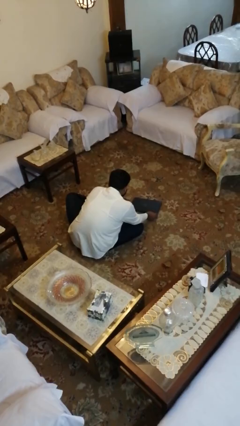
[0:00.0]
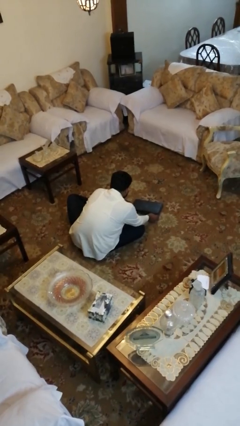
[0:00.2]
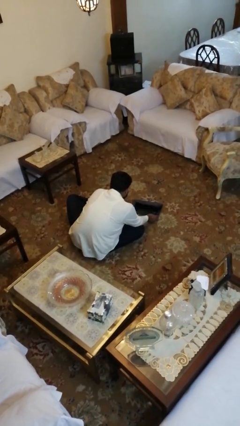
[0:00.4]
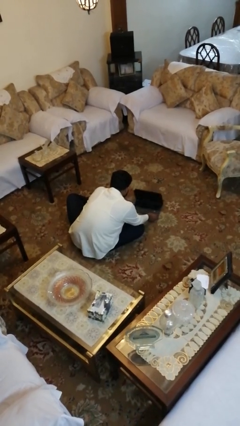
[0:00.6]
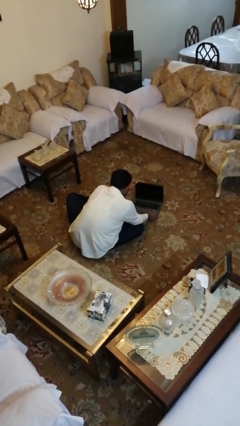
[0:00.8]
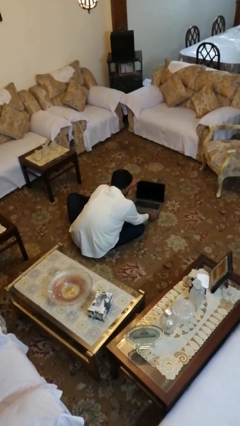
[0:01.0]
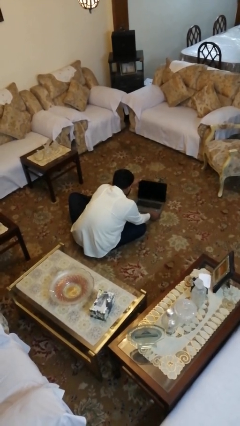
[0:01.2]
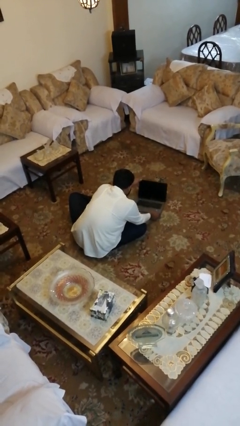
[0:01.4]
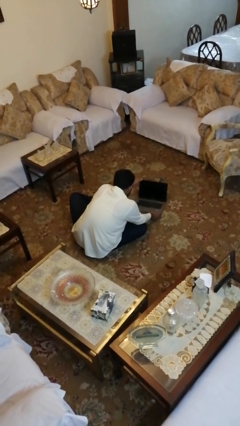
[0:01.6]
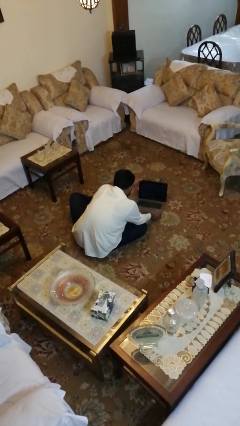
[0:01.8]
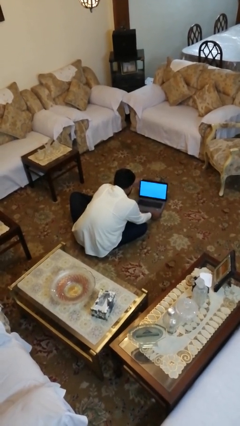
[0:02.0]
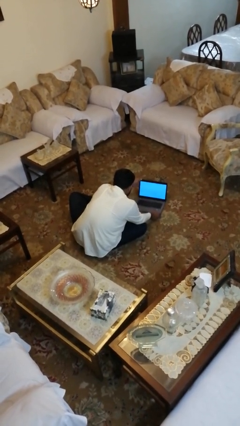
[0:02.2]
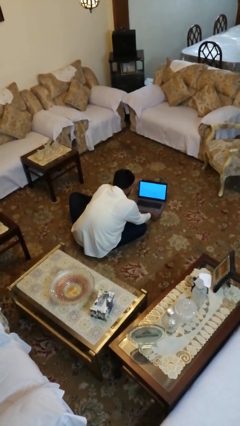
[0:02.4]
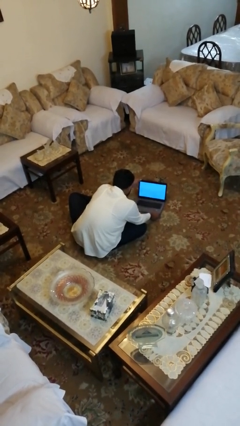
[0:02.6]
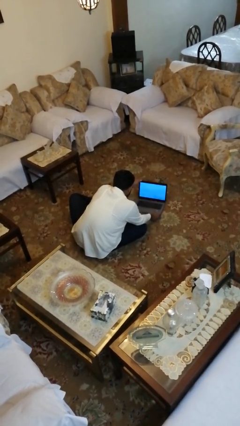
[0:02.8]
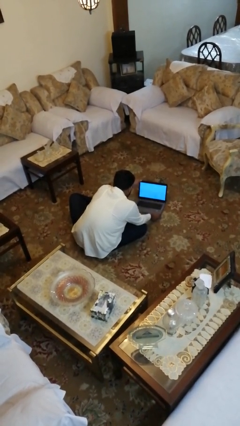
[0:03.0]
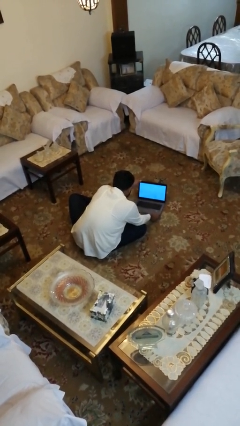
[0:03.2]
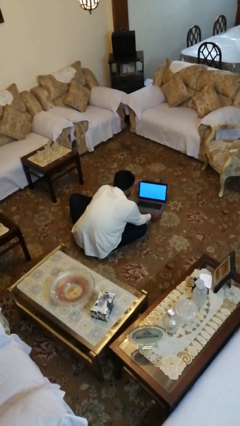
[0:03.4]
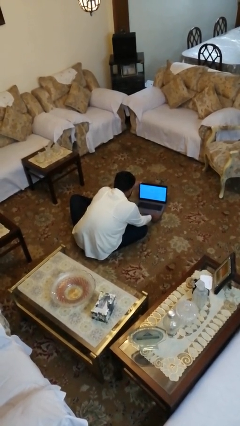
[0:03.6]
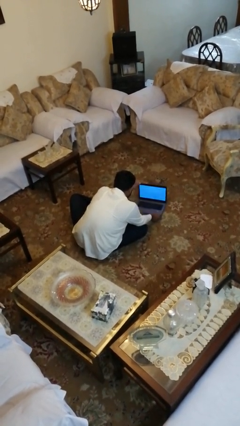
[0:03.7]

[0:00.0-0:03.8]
person opens laptop

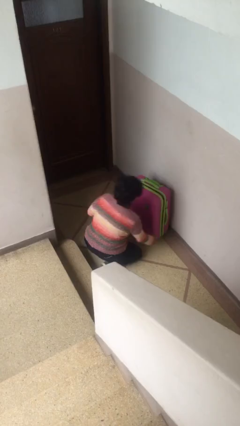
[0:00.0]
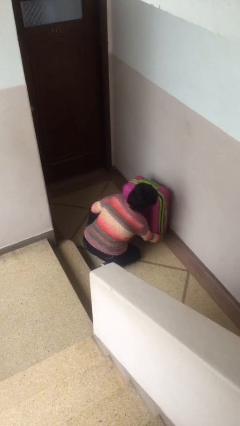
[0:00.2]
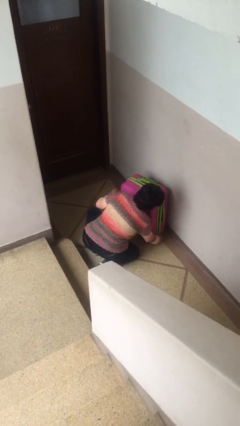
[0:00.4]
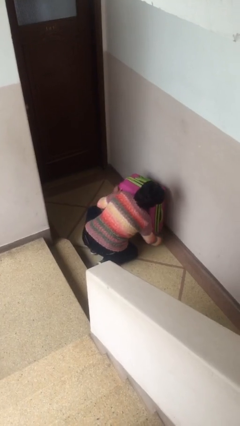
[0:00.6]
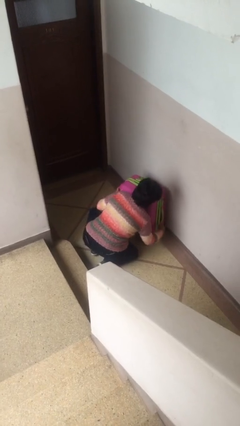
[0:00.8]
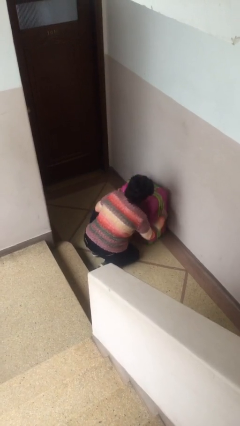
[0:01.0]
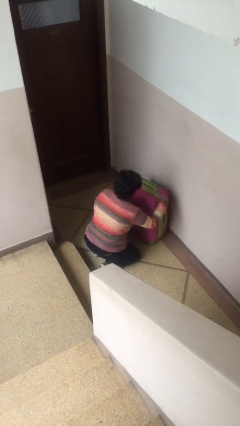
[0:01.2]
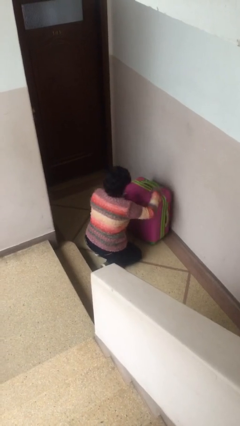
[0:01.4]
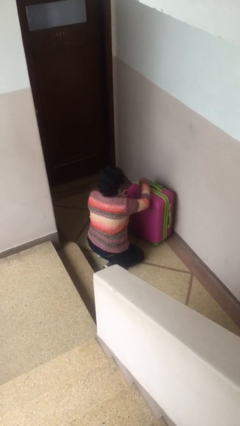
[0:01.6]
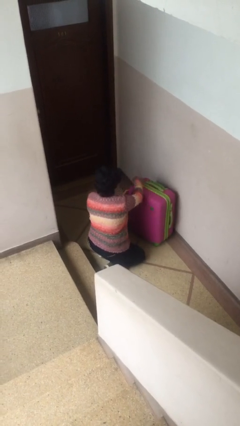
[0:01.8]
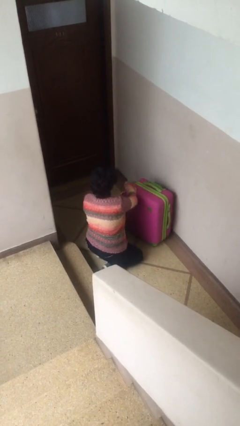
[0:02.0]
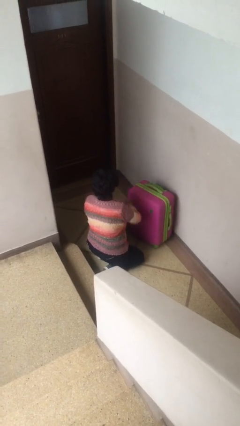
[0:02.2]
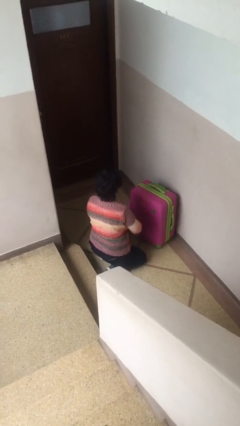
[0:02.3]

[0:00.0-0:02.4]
person closes suitcase

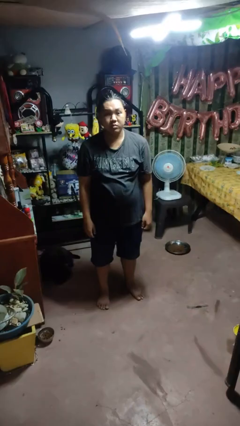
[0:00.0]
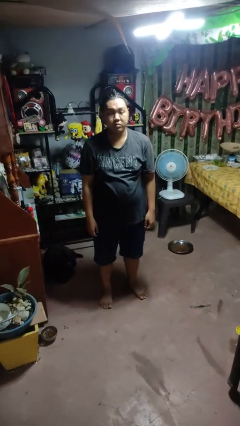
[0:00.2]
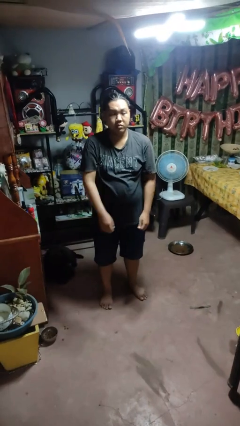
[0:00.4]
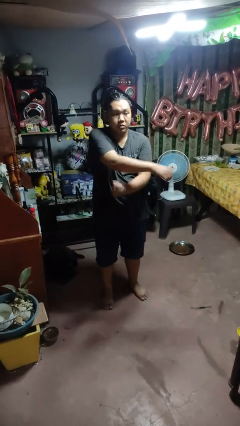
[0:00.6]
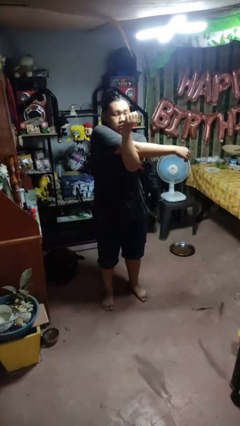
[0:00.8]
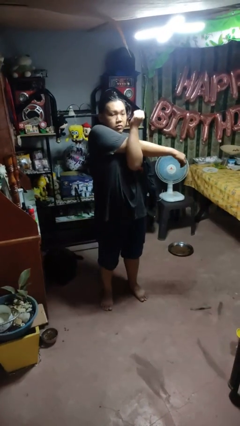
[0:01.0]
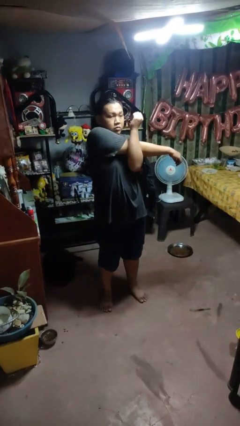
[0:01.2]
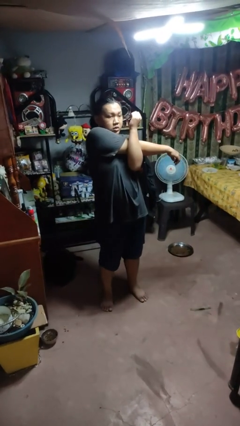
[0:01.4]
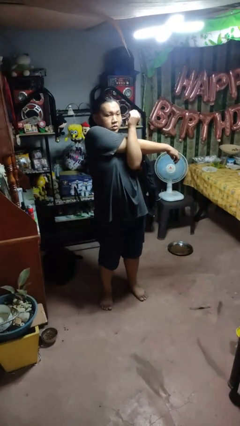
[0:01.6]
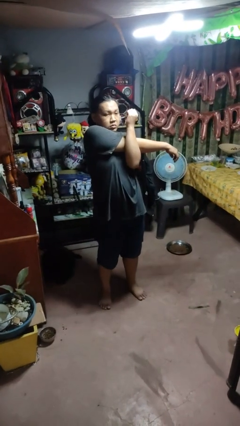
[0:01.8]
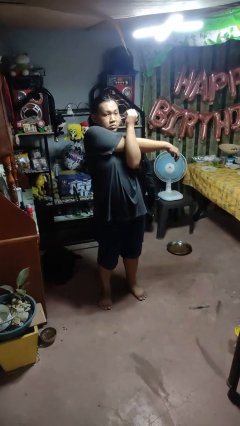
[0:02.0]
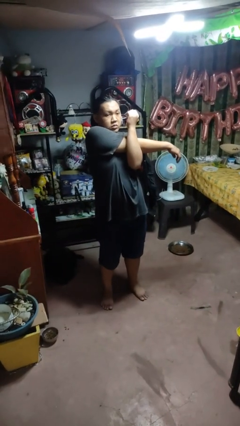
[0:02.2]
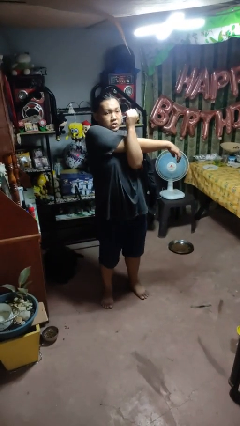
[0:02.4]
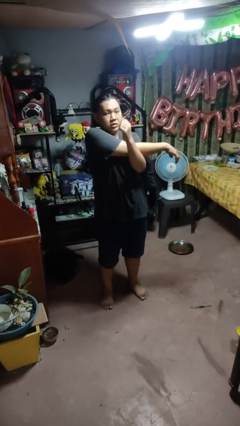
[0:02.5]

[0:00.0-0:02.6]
person crosses arms

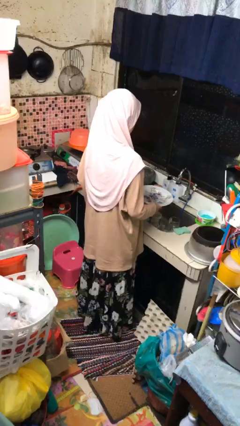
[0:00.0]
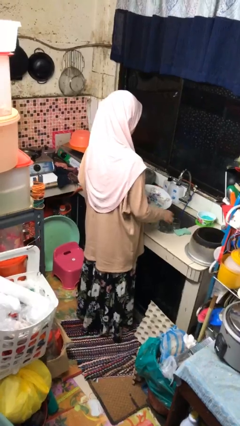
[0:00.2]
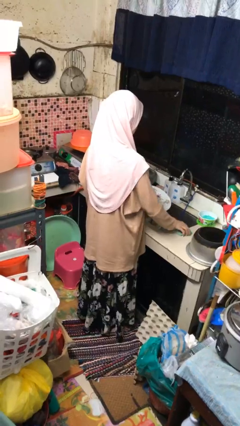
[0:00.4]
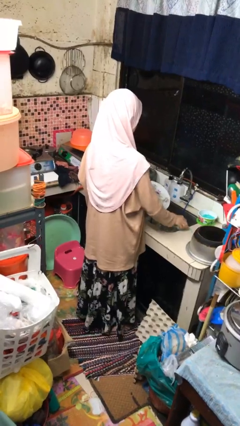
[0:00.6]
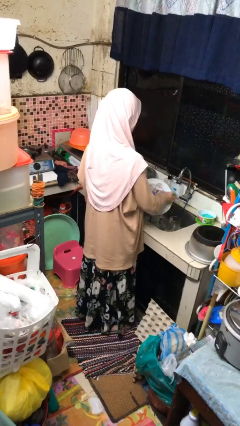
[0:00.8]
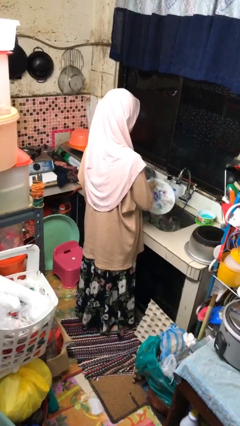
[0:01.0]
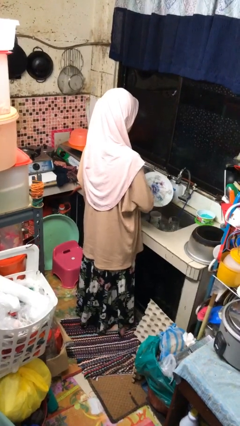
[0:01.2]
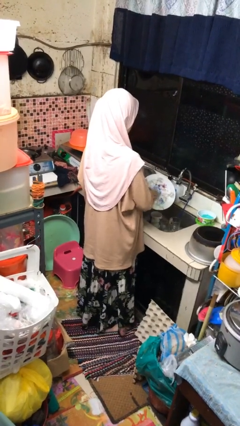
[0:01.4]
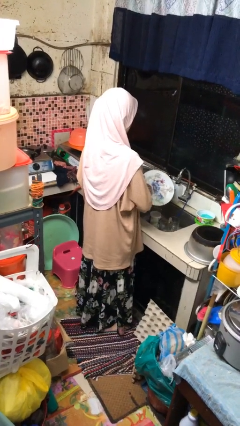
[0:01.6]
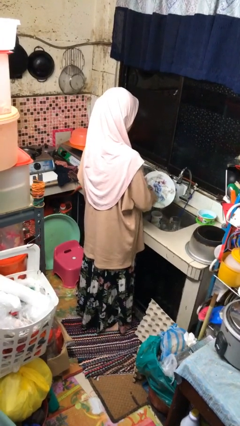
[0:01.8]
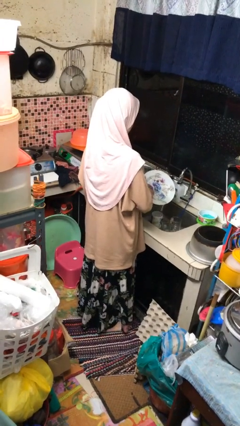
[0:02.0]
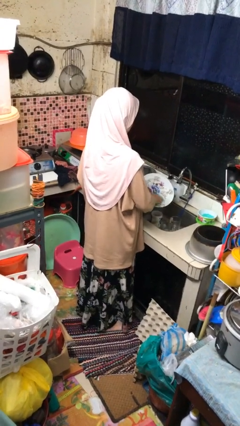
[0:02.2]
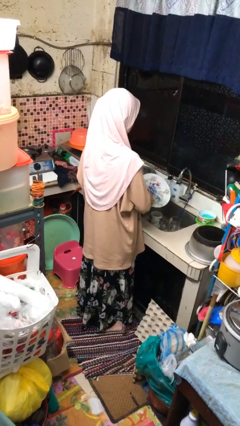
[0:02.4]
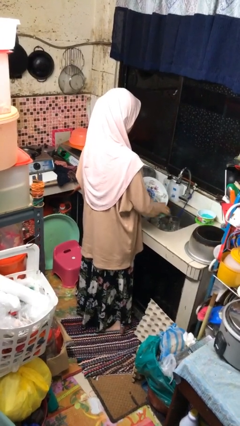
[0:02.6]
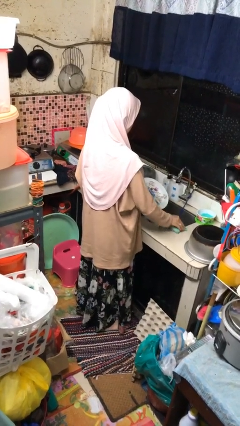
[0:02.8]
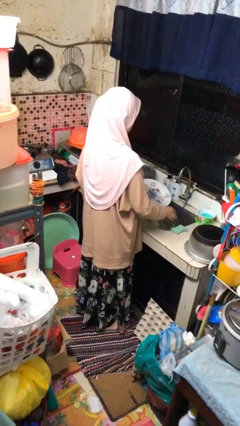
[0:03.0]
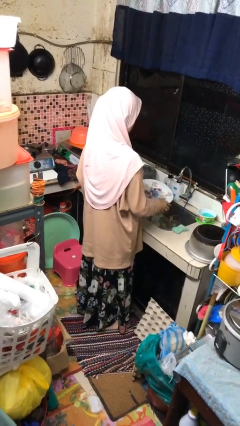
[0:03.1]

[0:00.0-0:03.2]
person washes dish

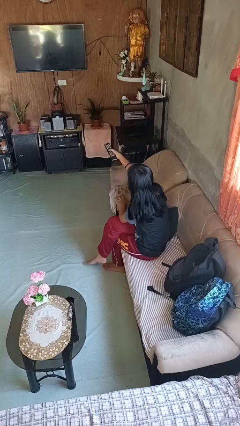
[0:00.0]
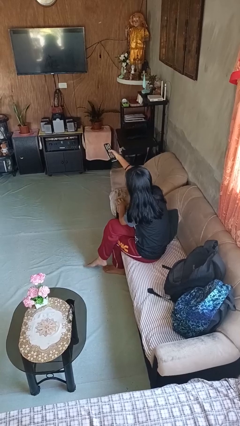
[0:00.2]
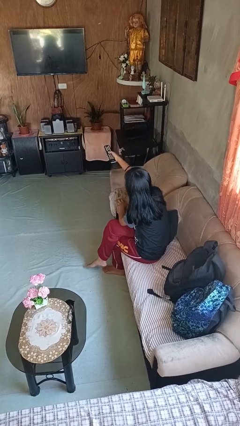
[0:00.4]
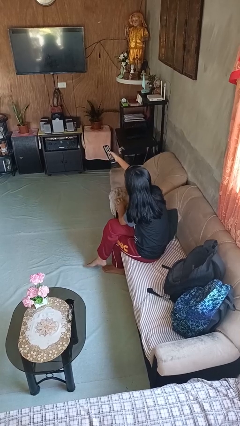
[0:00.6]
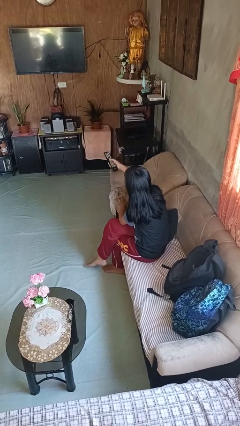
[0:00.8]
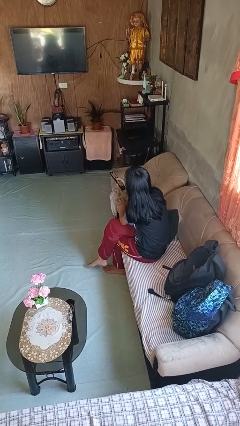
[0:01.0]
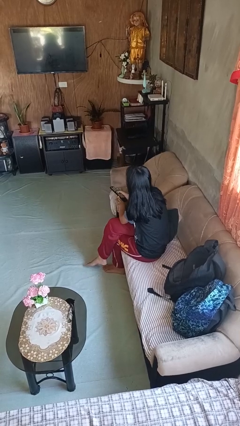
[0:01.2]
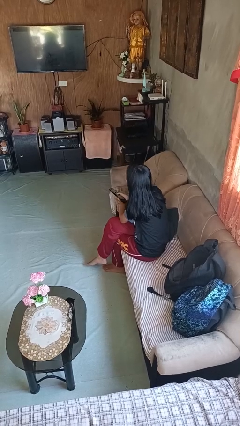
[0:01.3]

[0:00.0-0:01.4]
person uses television remote

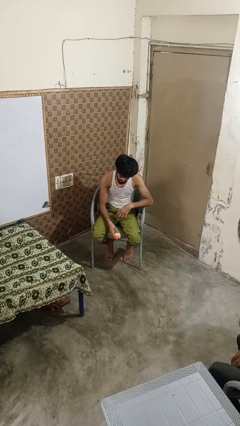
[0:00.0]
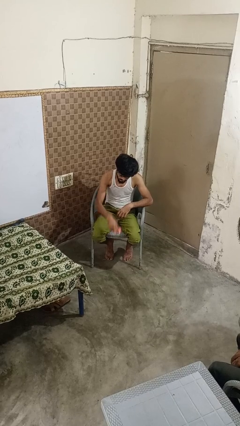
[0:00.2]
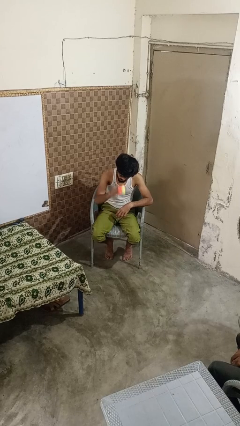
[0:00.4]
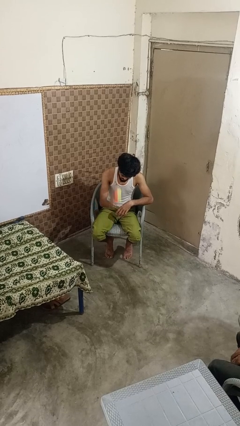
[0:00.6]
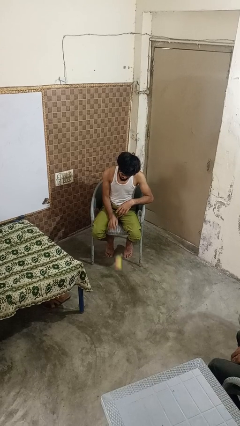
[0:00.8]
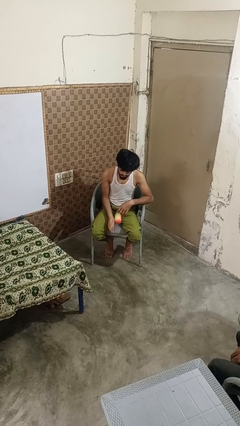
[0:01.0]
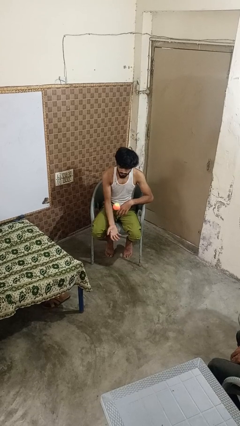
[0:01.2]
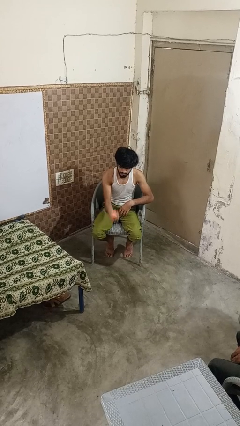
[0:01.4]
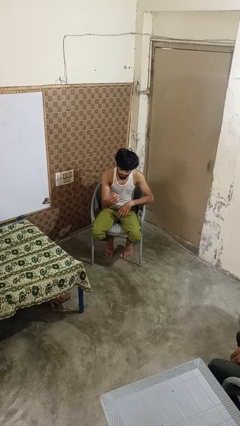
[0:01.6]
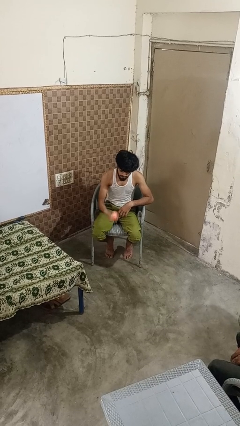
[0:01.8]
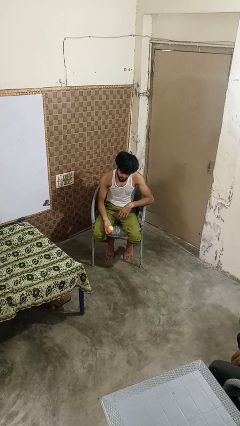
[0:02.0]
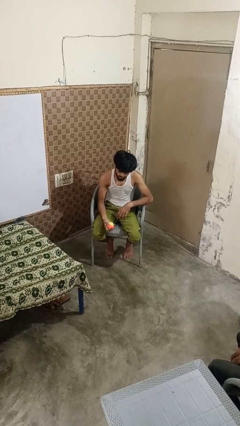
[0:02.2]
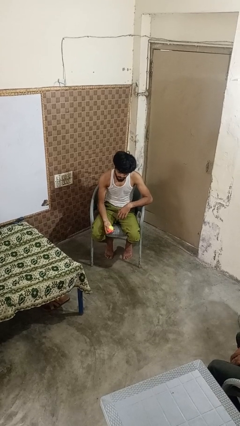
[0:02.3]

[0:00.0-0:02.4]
person bounces ball on floor

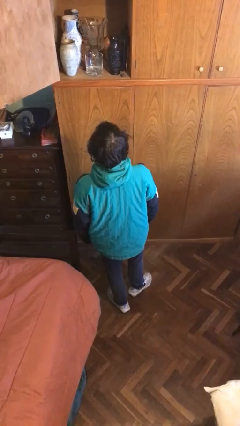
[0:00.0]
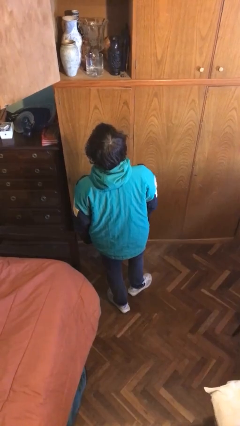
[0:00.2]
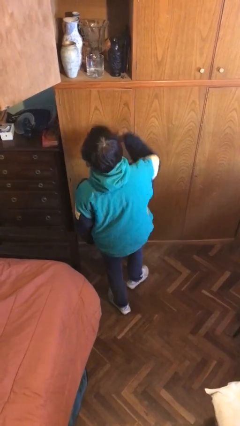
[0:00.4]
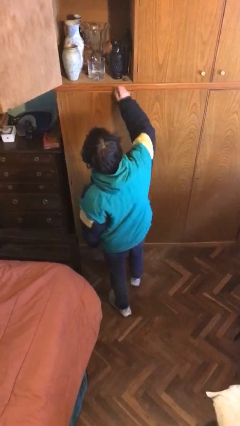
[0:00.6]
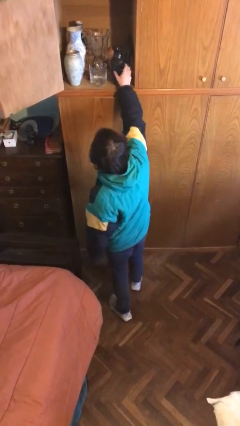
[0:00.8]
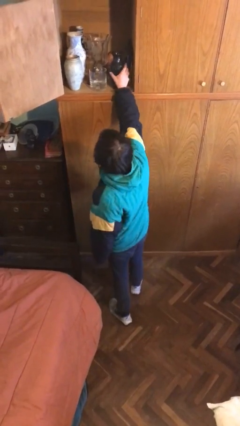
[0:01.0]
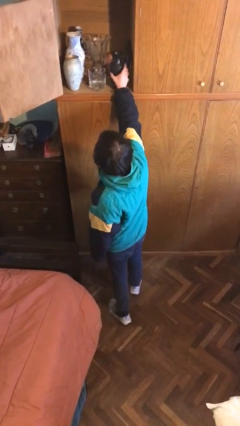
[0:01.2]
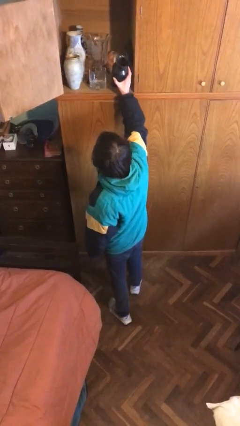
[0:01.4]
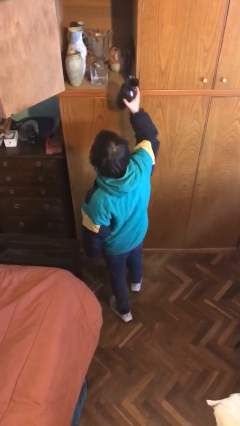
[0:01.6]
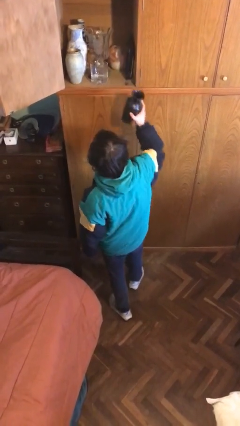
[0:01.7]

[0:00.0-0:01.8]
person picks up object from cabinet
